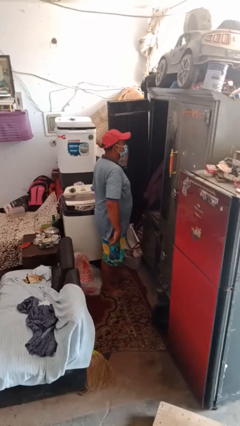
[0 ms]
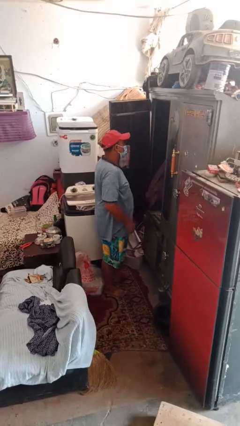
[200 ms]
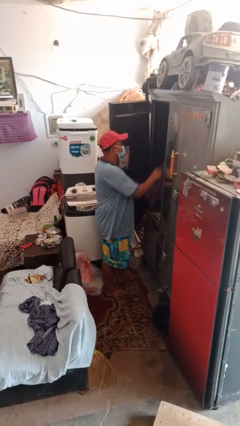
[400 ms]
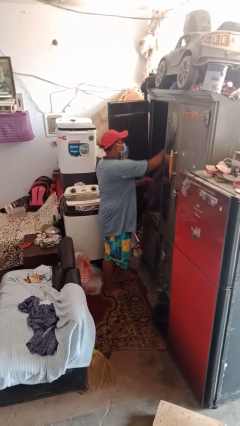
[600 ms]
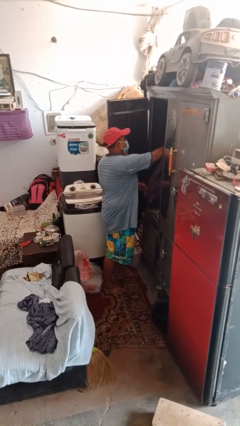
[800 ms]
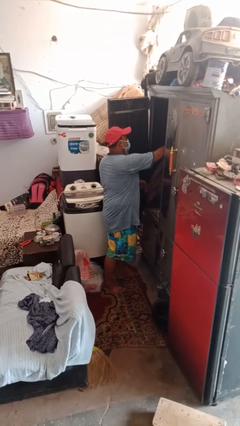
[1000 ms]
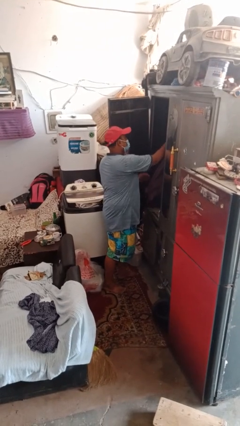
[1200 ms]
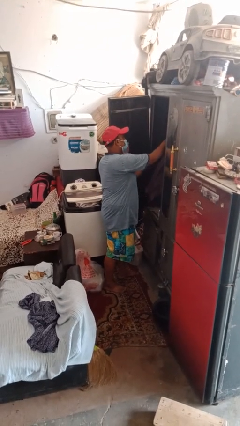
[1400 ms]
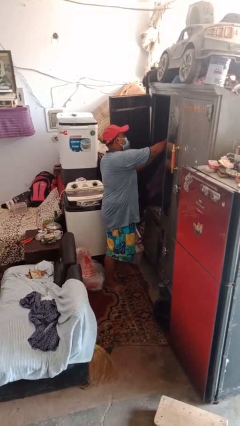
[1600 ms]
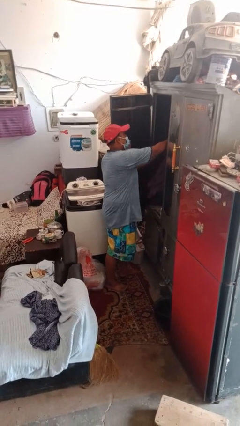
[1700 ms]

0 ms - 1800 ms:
person takes clothes from closet

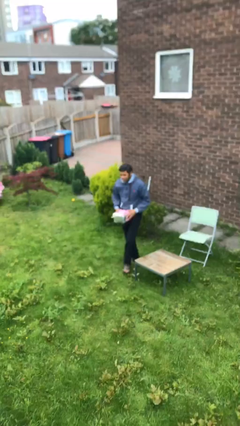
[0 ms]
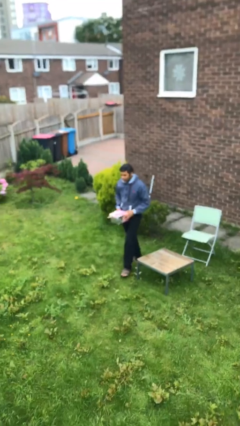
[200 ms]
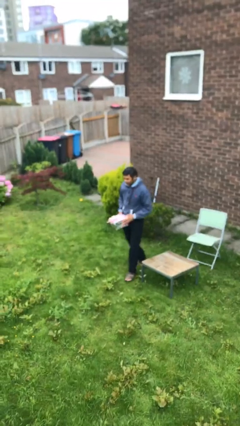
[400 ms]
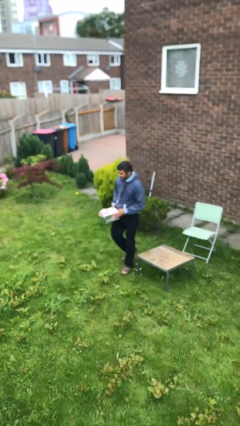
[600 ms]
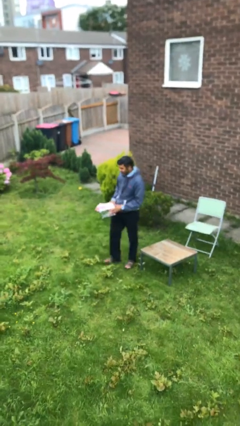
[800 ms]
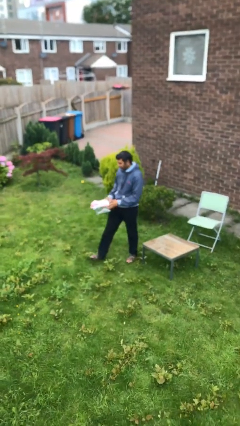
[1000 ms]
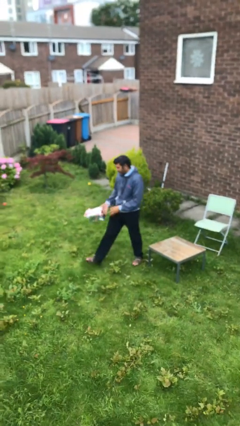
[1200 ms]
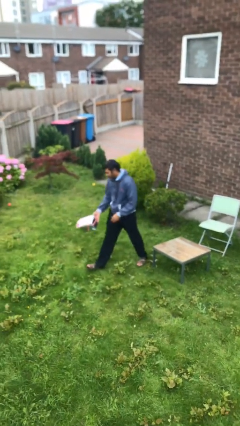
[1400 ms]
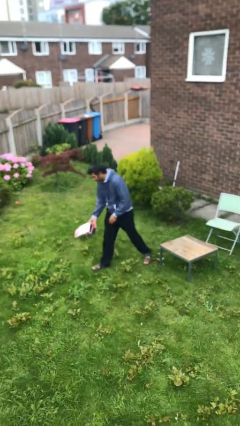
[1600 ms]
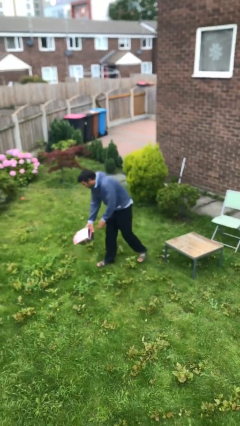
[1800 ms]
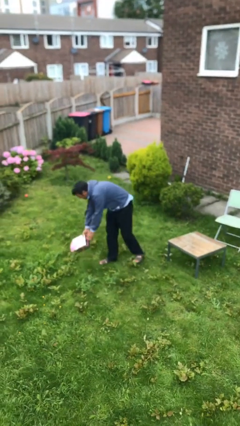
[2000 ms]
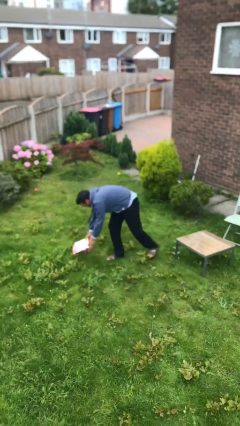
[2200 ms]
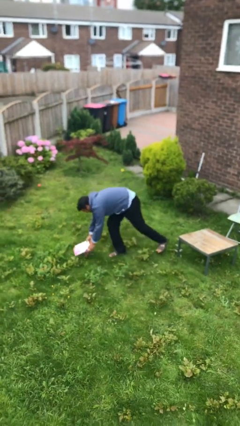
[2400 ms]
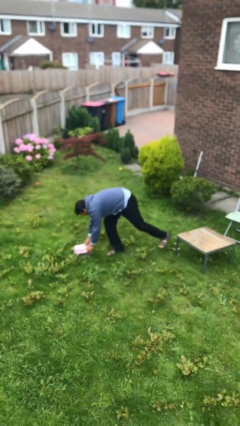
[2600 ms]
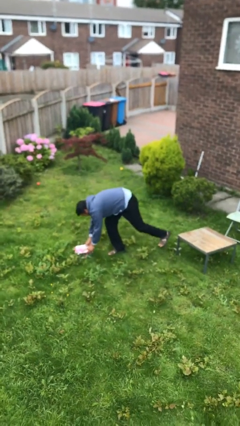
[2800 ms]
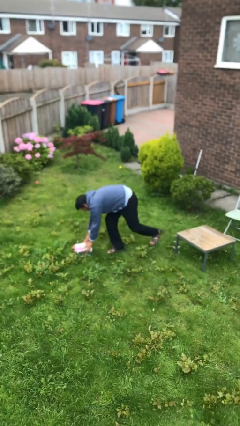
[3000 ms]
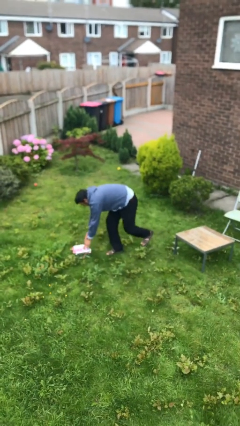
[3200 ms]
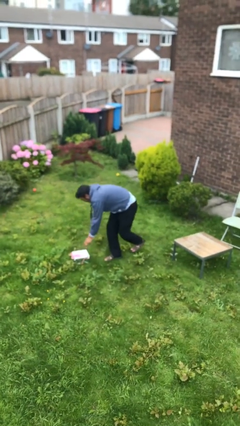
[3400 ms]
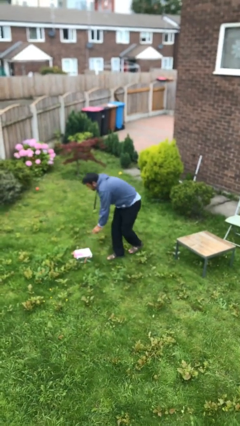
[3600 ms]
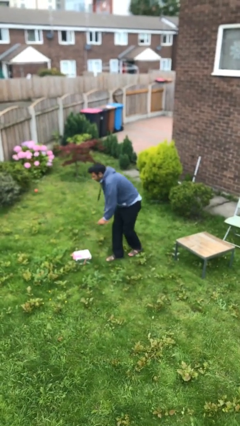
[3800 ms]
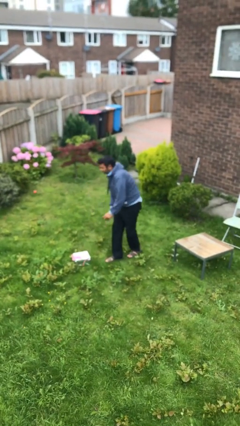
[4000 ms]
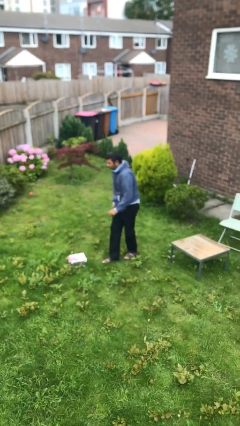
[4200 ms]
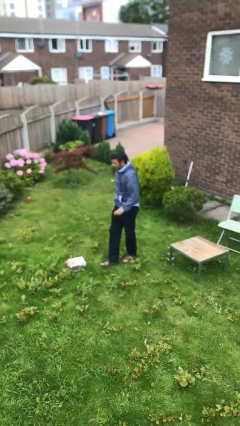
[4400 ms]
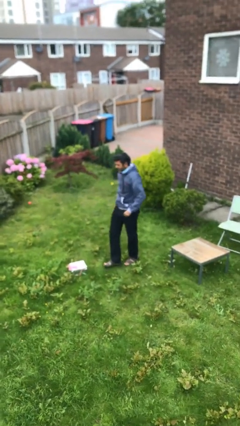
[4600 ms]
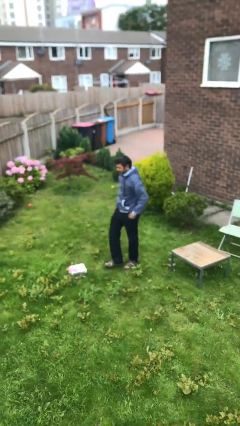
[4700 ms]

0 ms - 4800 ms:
person puts down object on floor

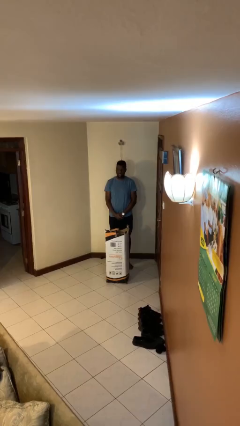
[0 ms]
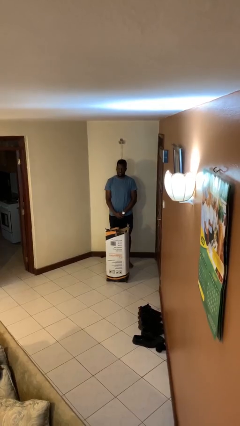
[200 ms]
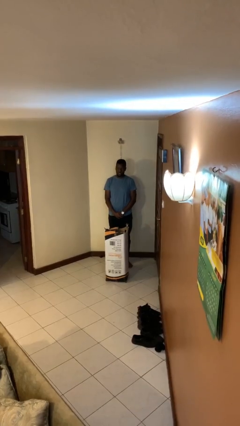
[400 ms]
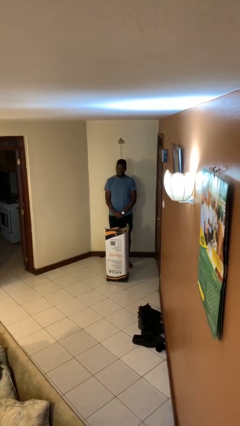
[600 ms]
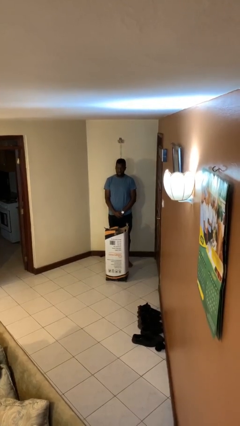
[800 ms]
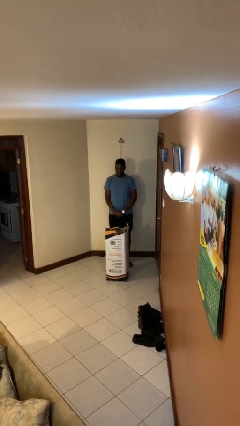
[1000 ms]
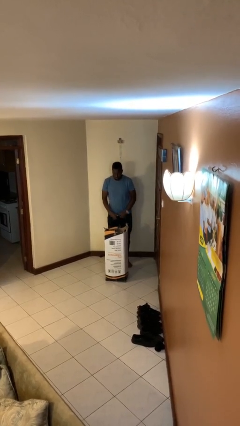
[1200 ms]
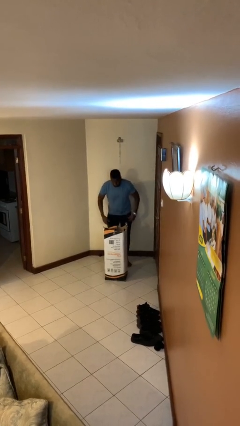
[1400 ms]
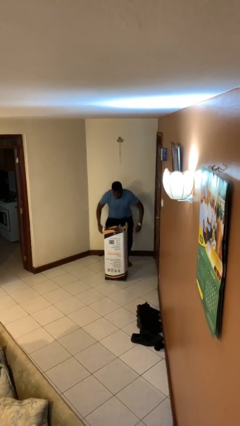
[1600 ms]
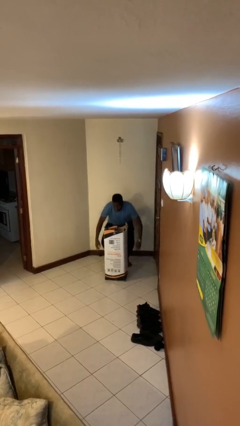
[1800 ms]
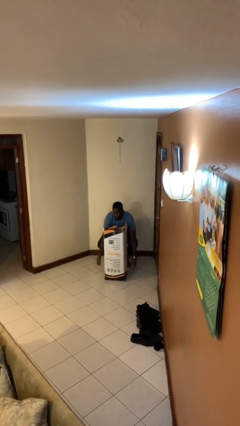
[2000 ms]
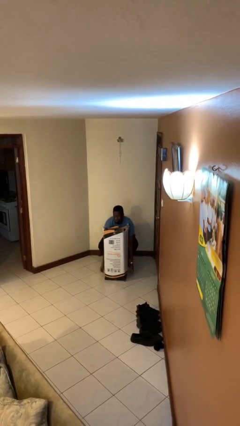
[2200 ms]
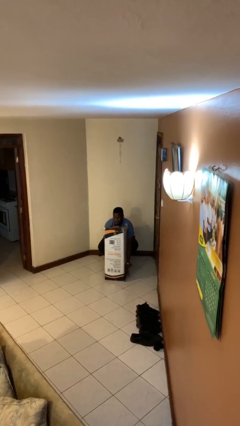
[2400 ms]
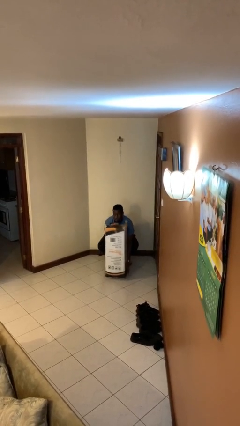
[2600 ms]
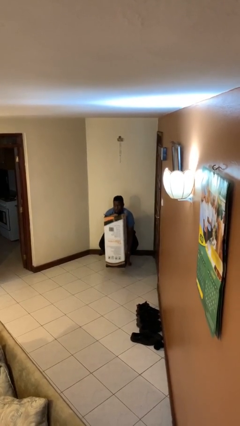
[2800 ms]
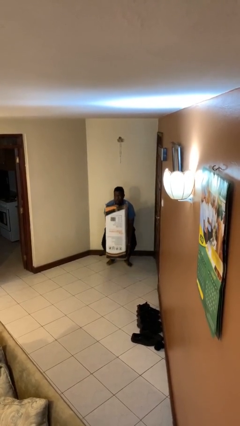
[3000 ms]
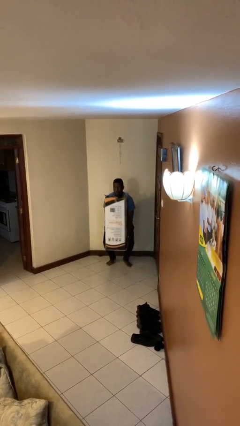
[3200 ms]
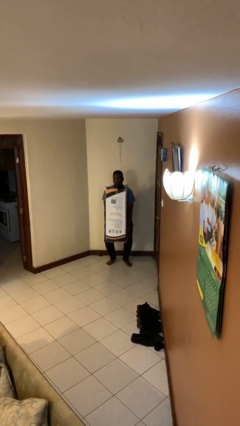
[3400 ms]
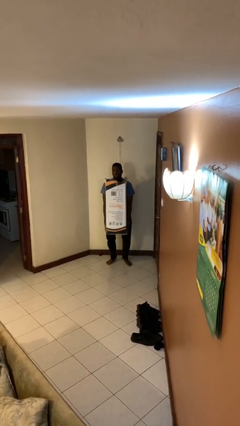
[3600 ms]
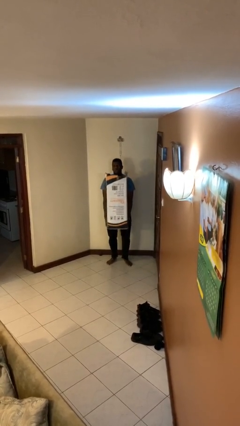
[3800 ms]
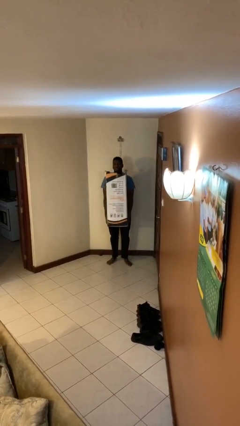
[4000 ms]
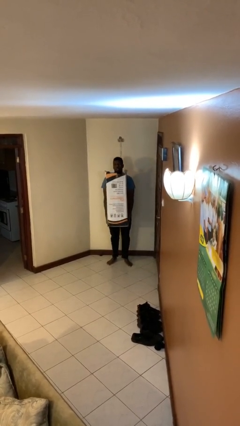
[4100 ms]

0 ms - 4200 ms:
person picks up object from floor

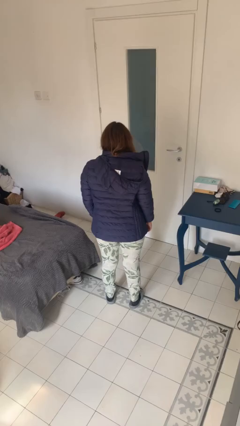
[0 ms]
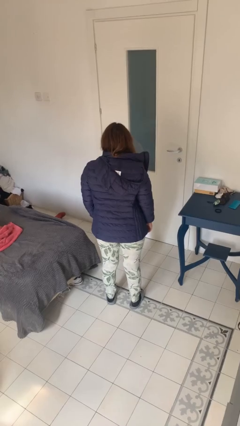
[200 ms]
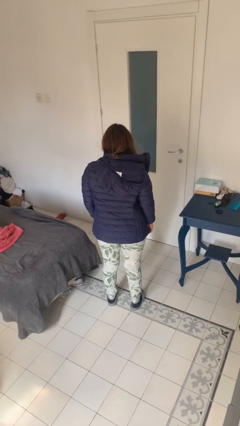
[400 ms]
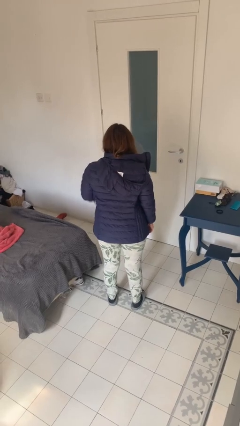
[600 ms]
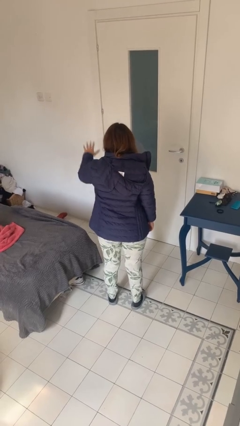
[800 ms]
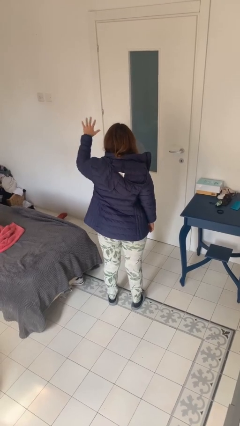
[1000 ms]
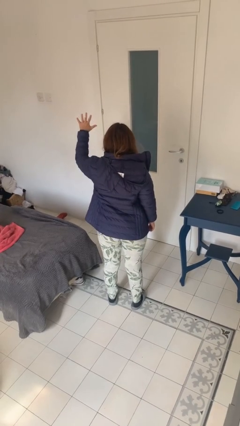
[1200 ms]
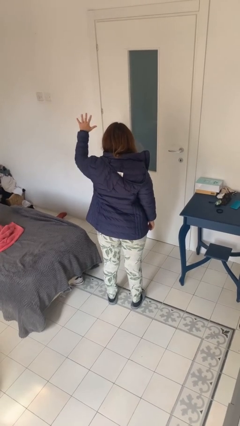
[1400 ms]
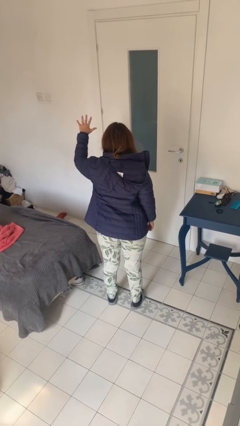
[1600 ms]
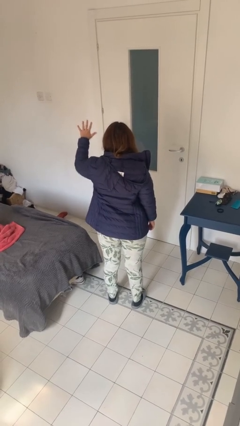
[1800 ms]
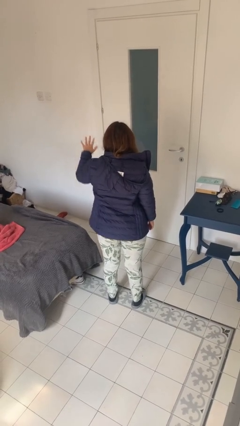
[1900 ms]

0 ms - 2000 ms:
person gestures number five

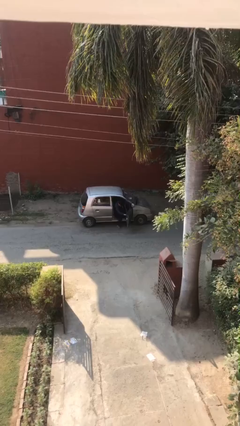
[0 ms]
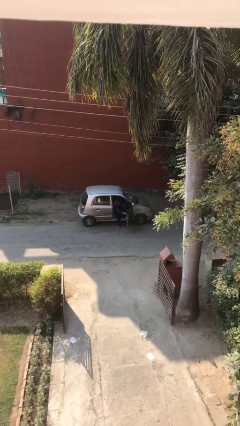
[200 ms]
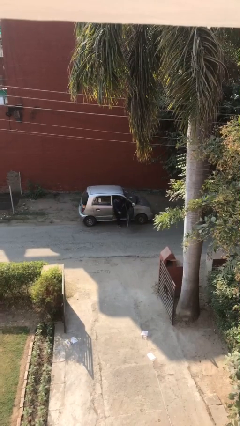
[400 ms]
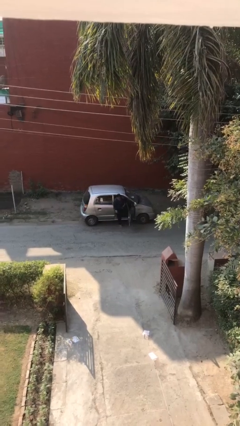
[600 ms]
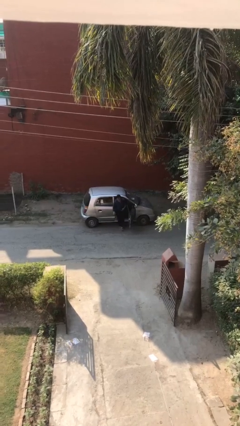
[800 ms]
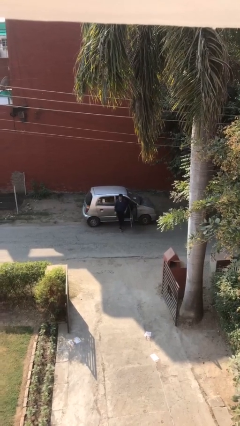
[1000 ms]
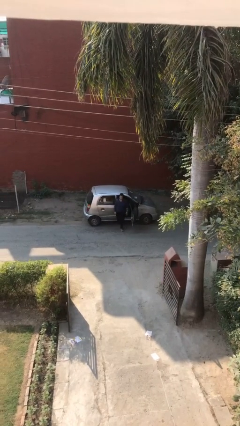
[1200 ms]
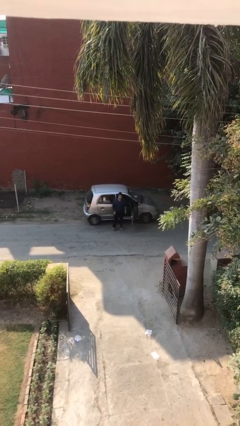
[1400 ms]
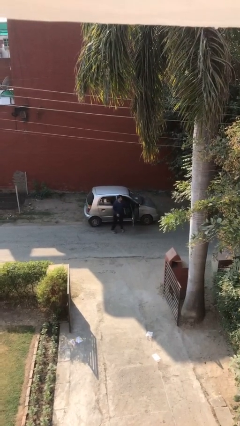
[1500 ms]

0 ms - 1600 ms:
person exits car

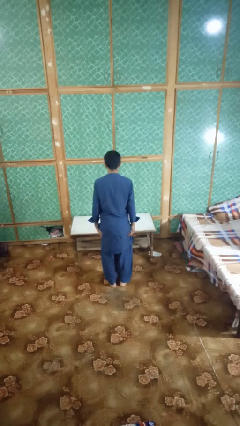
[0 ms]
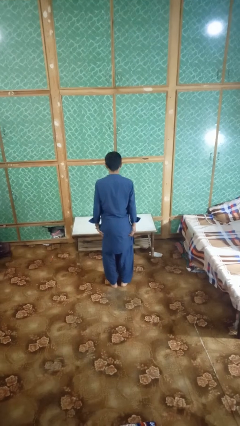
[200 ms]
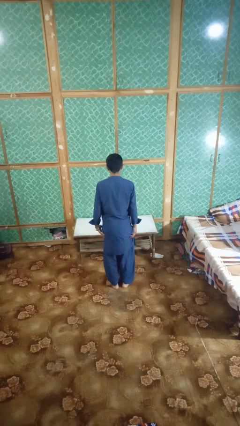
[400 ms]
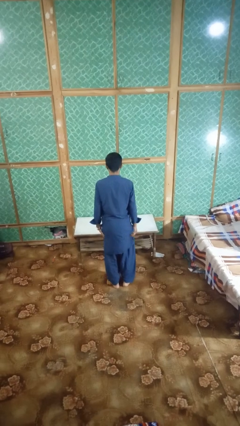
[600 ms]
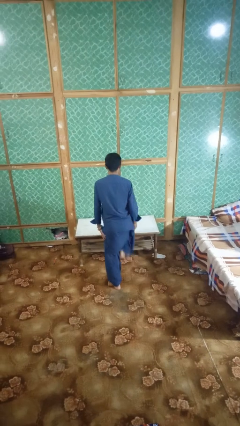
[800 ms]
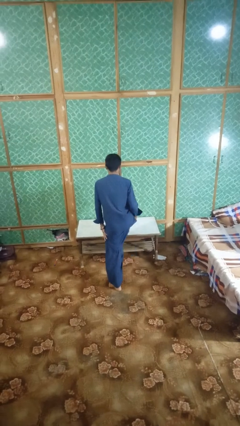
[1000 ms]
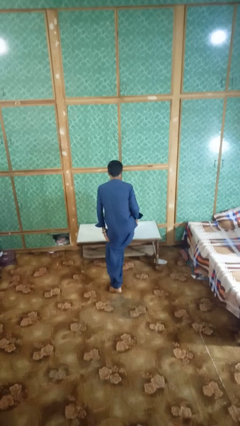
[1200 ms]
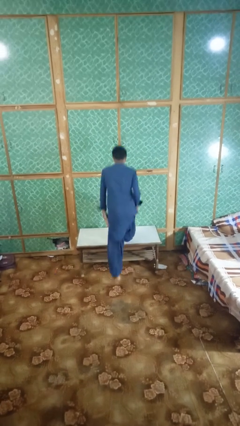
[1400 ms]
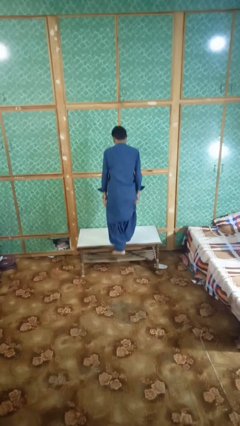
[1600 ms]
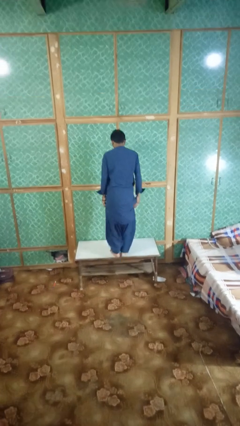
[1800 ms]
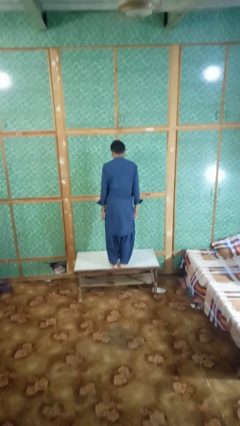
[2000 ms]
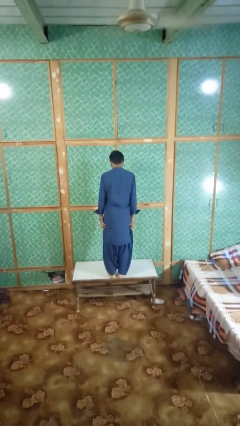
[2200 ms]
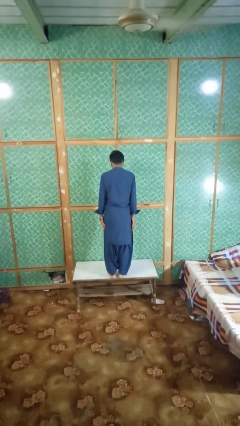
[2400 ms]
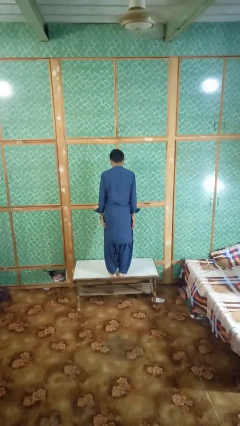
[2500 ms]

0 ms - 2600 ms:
person climbs on table

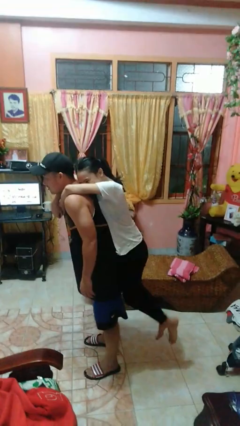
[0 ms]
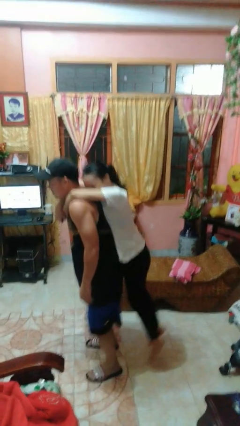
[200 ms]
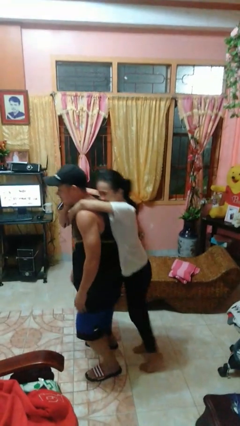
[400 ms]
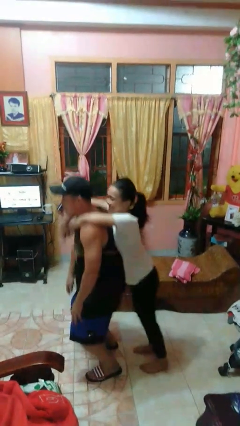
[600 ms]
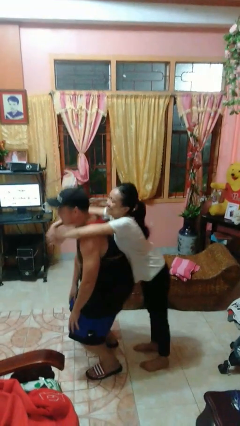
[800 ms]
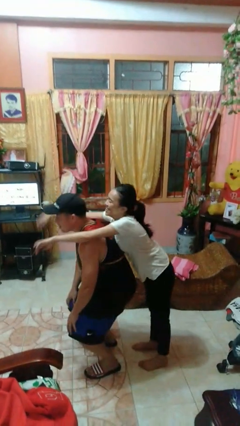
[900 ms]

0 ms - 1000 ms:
person puts down person
